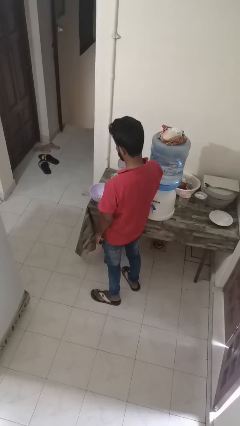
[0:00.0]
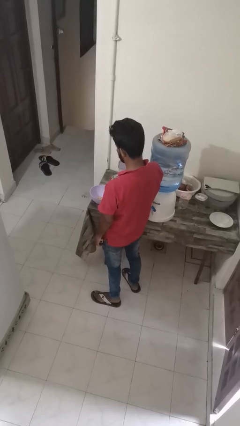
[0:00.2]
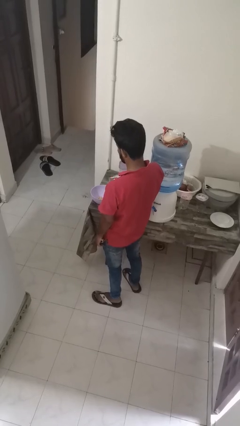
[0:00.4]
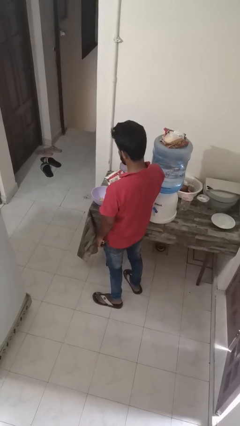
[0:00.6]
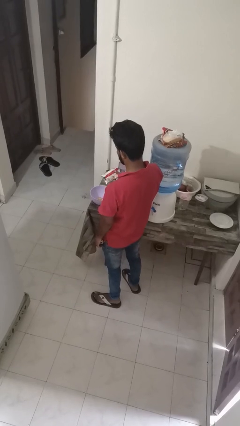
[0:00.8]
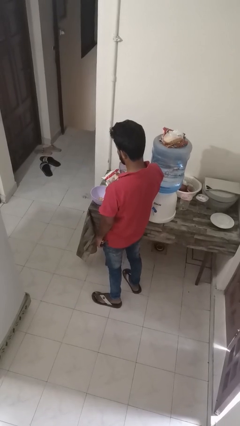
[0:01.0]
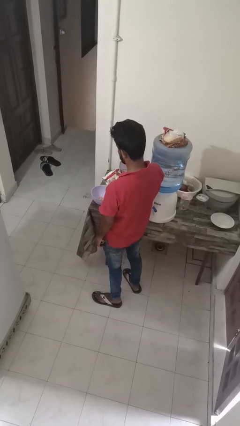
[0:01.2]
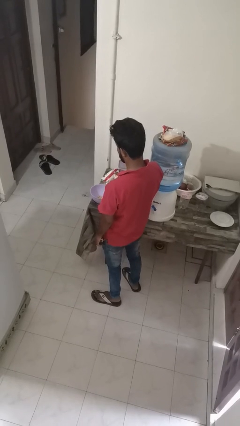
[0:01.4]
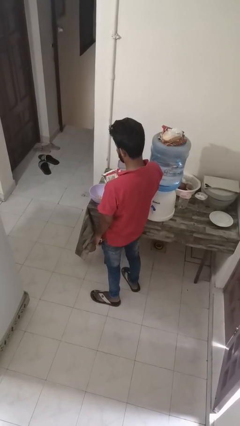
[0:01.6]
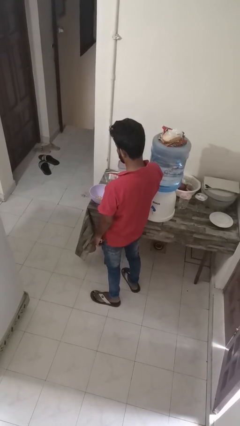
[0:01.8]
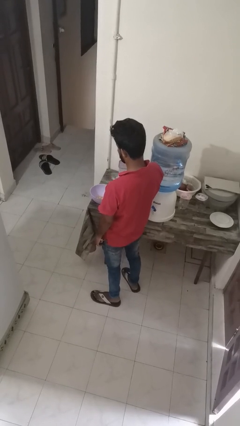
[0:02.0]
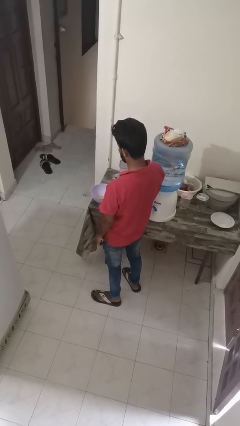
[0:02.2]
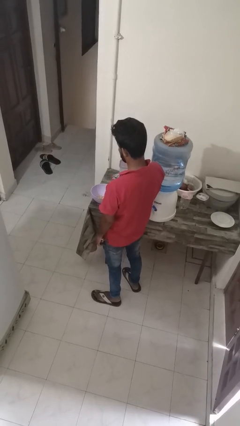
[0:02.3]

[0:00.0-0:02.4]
person pours into bowl

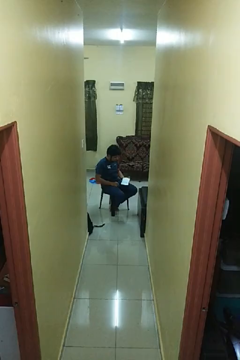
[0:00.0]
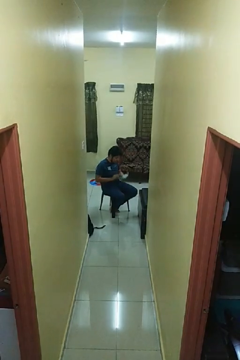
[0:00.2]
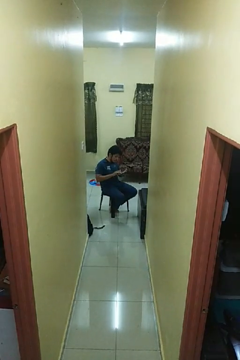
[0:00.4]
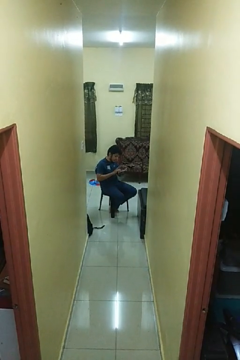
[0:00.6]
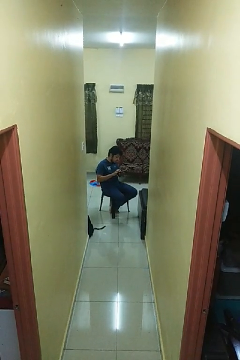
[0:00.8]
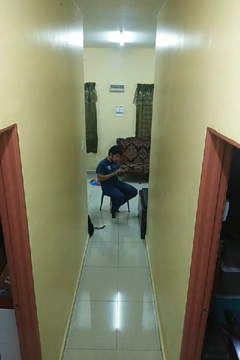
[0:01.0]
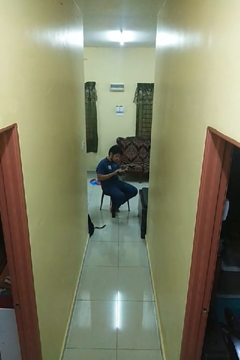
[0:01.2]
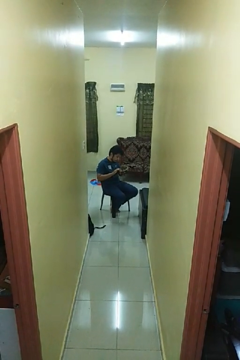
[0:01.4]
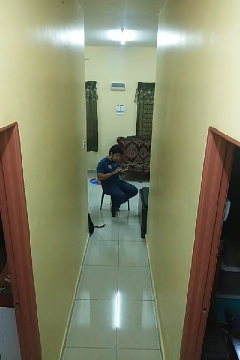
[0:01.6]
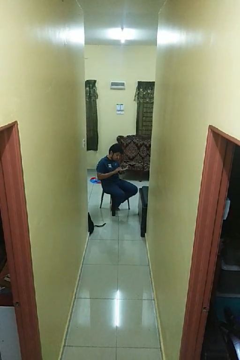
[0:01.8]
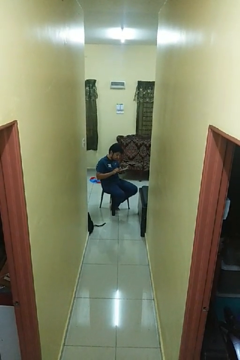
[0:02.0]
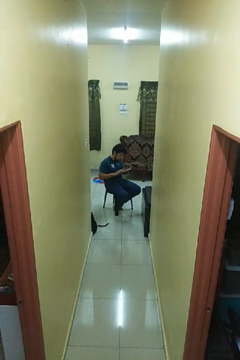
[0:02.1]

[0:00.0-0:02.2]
person interacts with tablet

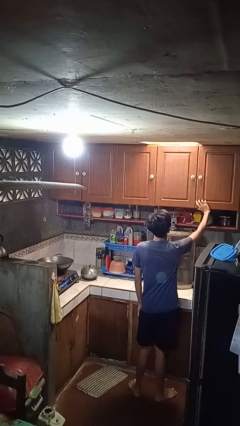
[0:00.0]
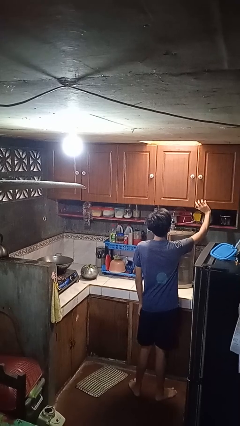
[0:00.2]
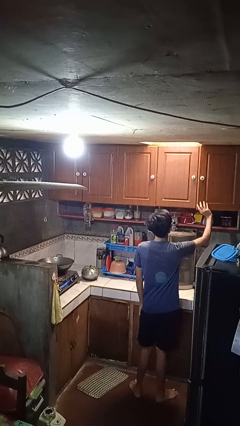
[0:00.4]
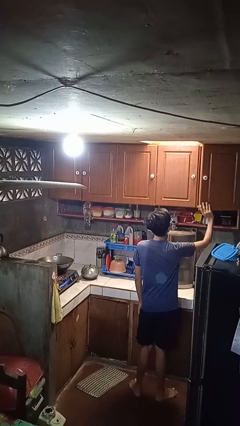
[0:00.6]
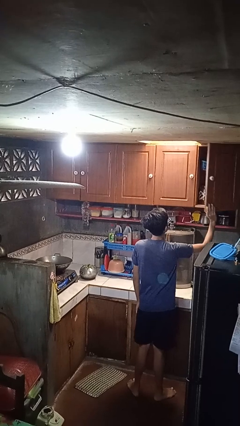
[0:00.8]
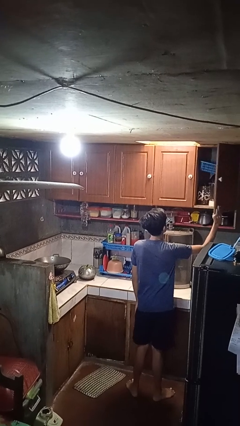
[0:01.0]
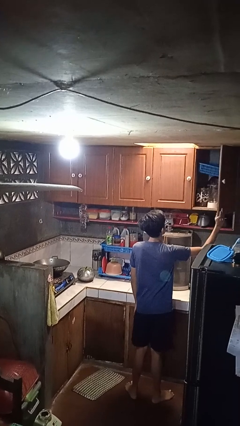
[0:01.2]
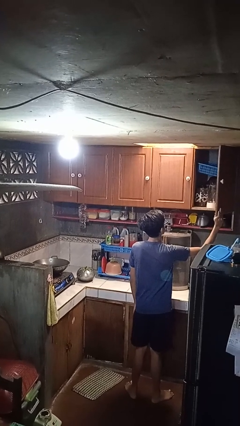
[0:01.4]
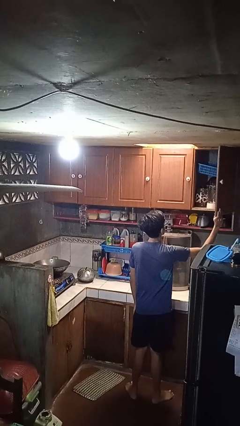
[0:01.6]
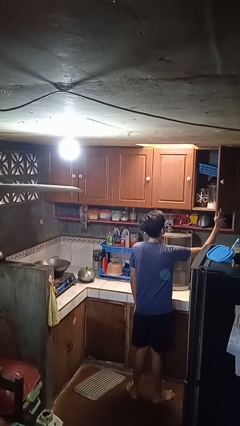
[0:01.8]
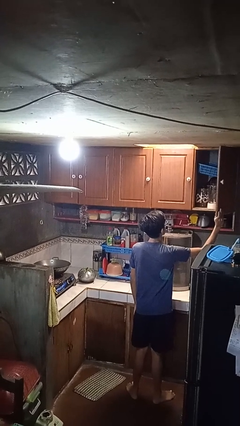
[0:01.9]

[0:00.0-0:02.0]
person opens cabinet

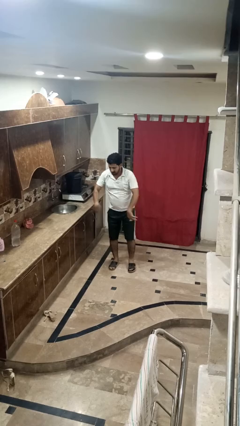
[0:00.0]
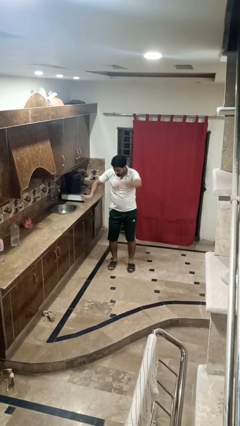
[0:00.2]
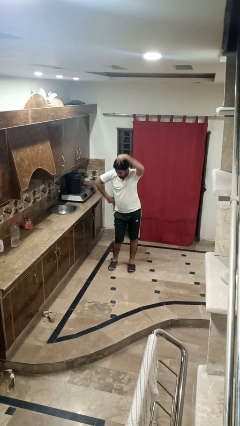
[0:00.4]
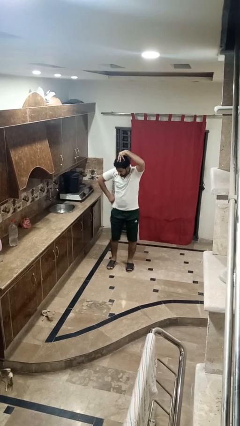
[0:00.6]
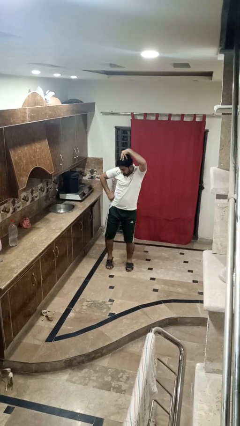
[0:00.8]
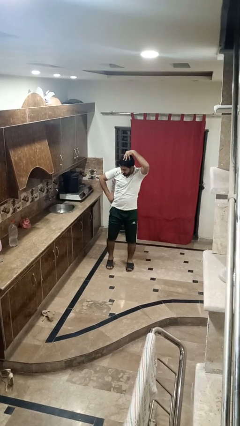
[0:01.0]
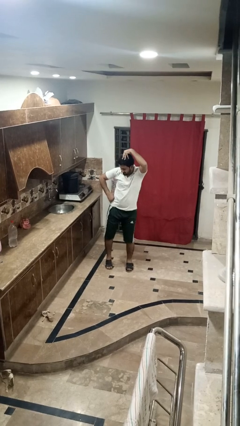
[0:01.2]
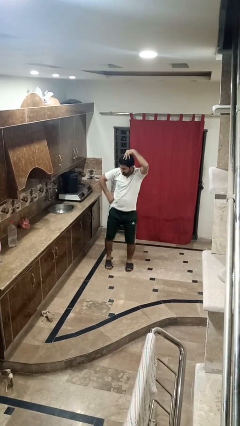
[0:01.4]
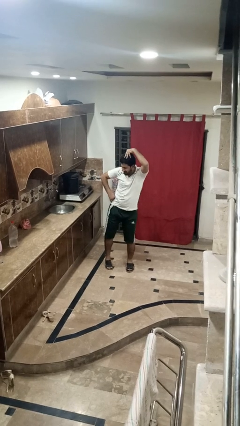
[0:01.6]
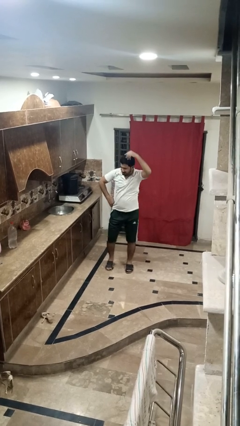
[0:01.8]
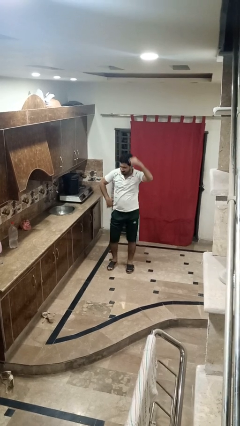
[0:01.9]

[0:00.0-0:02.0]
person dances in place

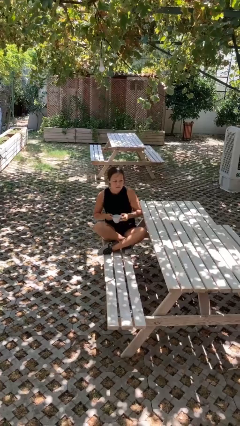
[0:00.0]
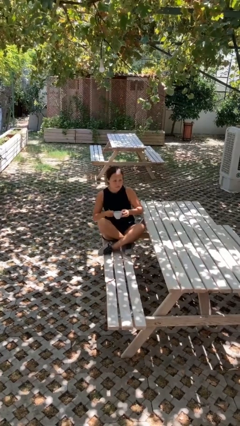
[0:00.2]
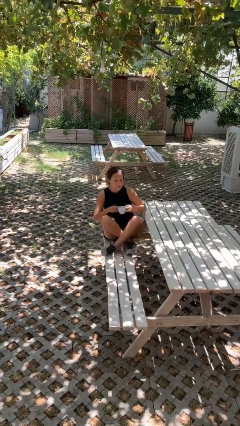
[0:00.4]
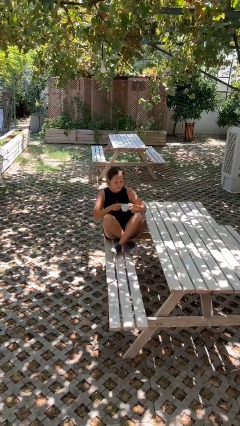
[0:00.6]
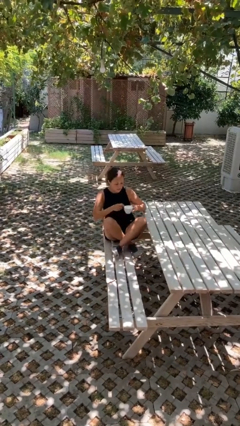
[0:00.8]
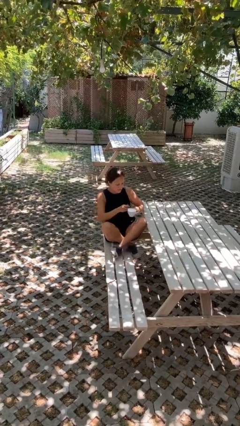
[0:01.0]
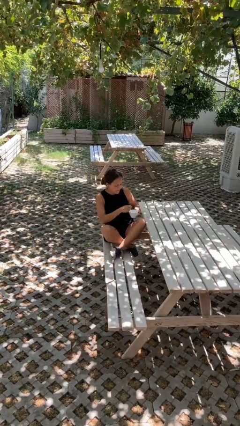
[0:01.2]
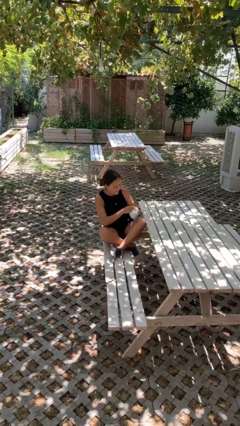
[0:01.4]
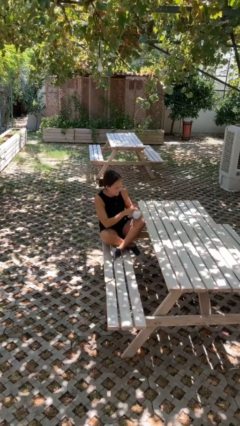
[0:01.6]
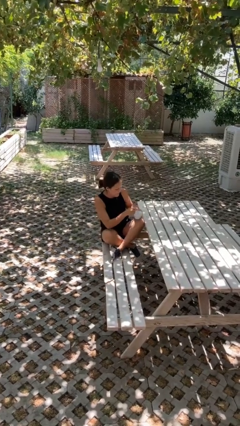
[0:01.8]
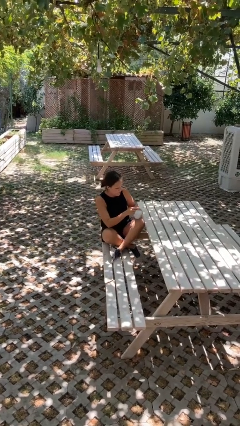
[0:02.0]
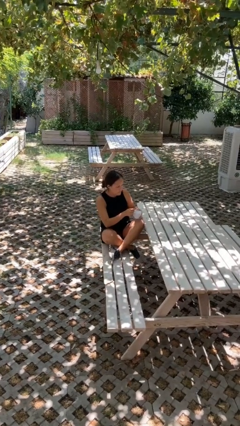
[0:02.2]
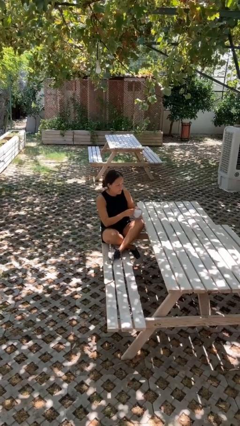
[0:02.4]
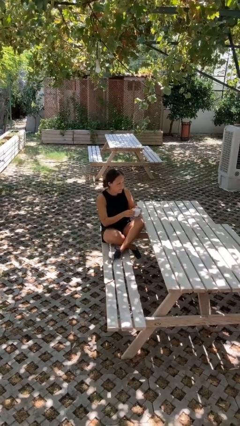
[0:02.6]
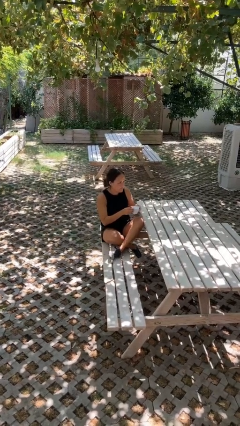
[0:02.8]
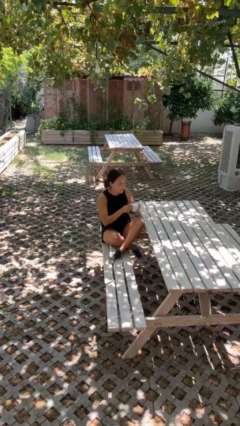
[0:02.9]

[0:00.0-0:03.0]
person stirs mug

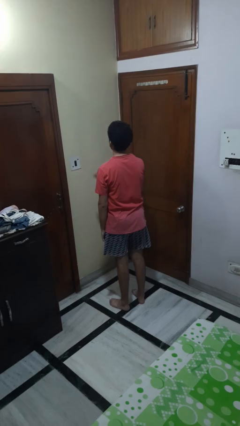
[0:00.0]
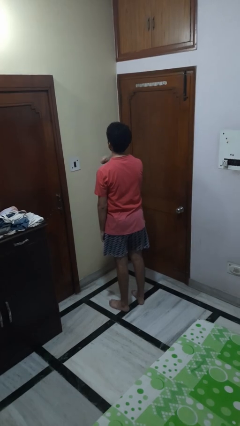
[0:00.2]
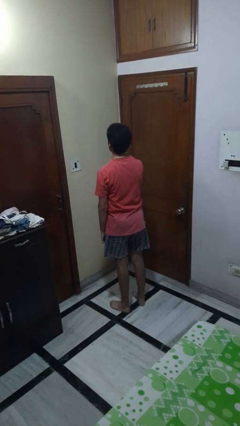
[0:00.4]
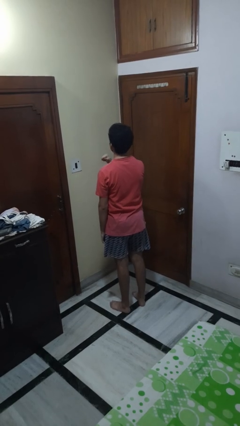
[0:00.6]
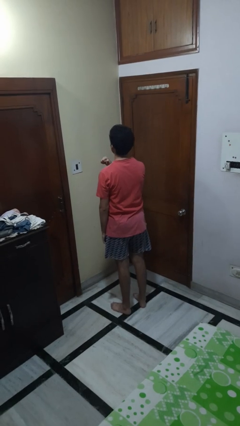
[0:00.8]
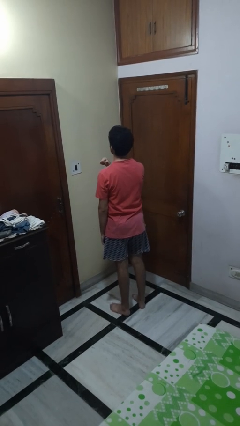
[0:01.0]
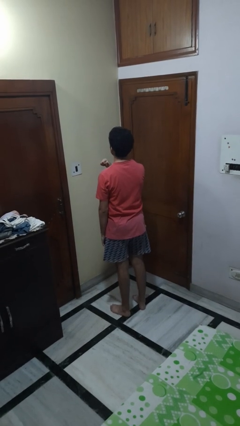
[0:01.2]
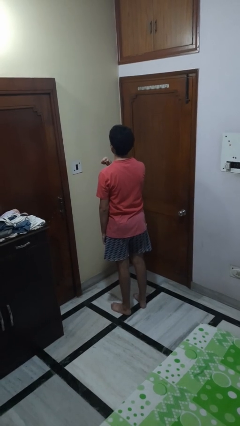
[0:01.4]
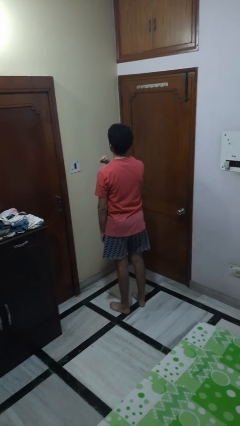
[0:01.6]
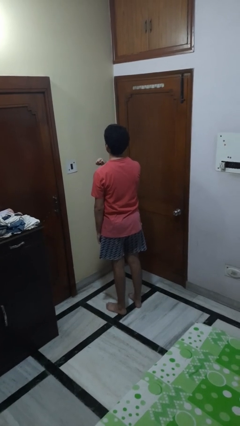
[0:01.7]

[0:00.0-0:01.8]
person gestures cut

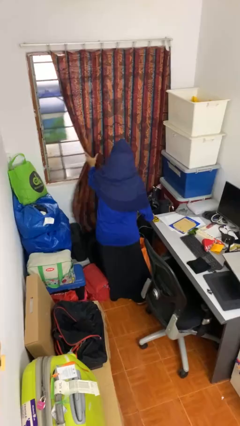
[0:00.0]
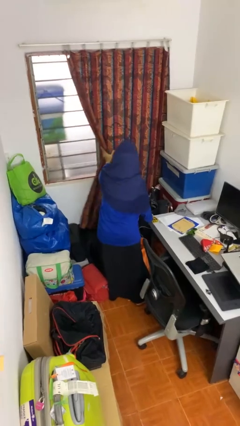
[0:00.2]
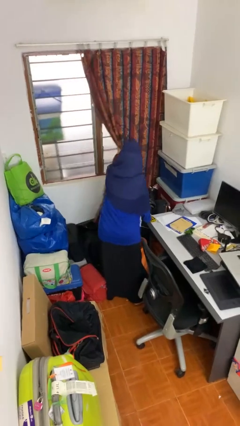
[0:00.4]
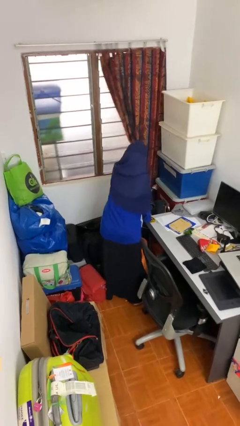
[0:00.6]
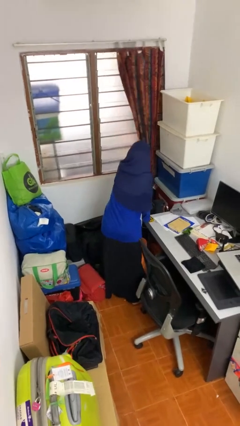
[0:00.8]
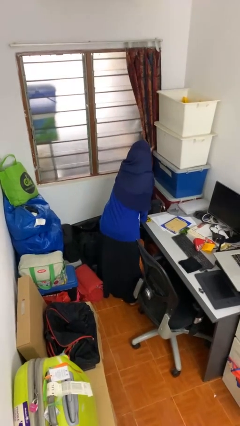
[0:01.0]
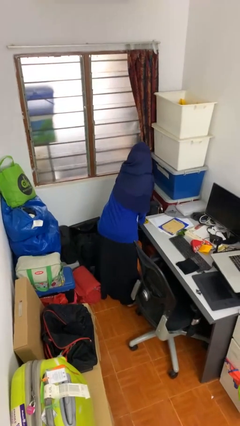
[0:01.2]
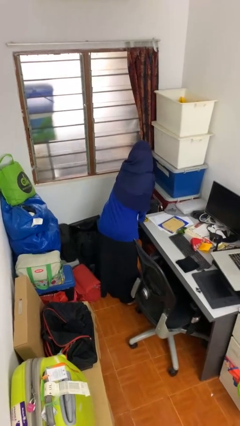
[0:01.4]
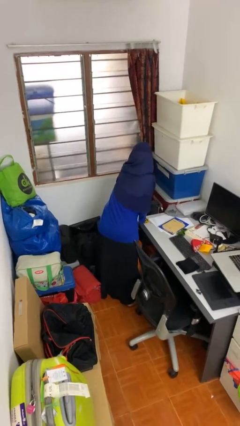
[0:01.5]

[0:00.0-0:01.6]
person opens curtains

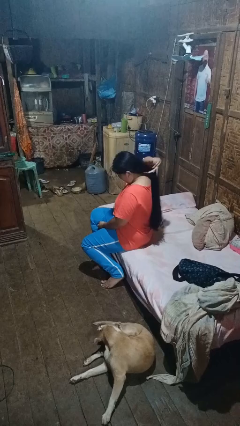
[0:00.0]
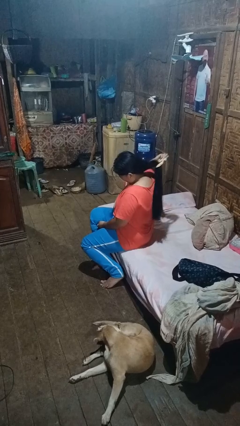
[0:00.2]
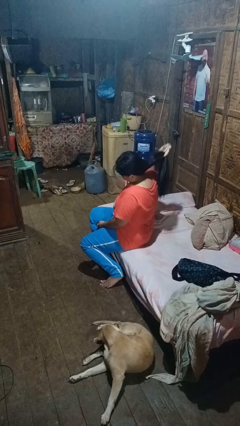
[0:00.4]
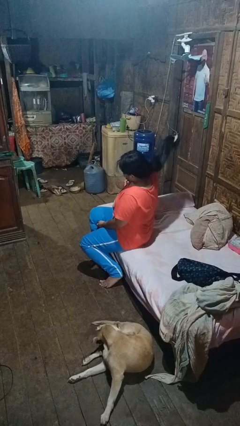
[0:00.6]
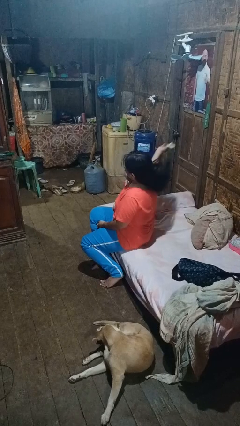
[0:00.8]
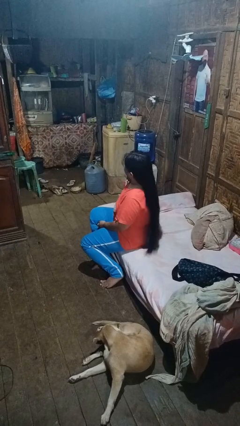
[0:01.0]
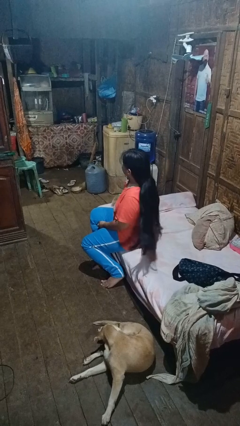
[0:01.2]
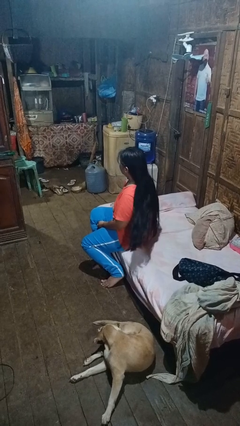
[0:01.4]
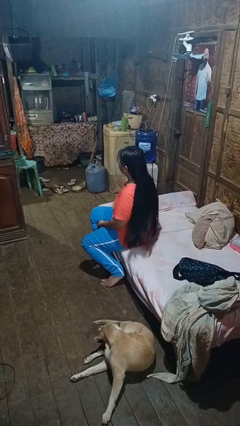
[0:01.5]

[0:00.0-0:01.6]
person takes off hairtie
